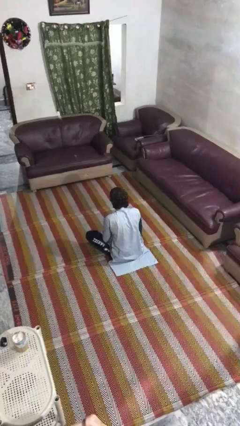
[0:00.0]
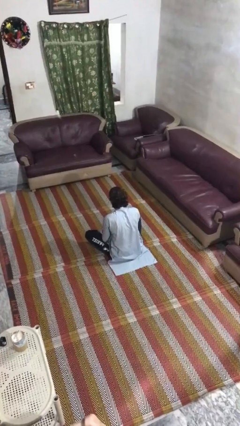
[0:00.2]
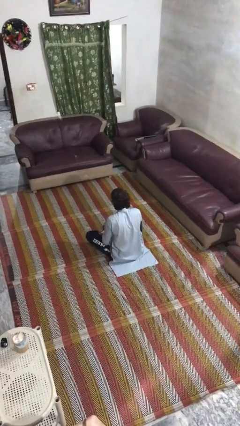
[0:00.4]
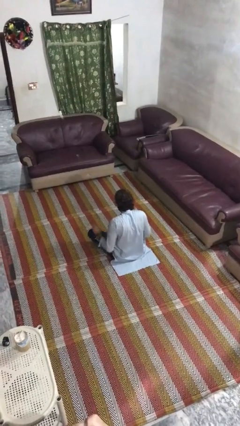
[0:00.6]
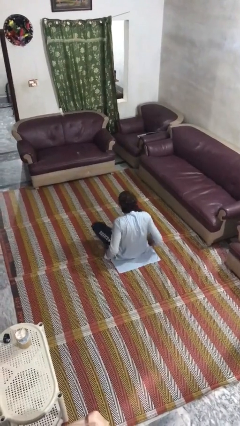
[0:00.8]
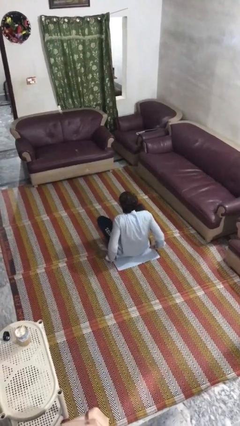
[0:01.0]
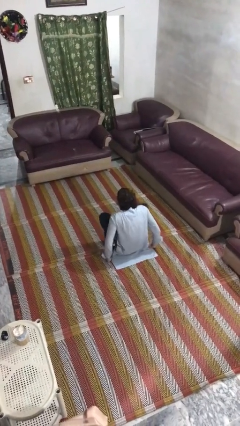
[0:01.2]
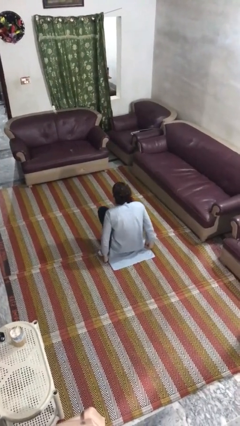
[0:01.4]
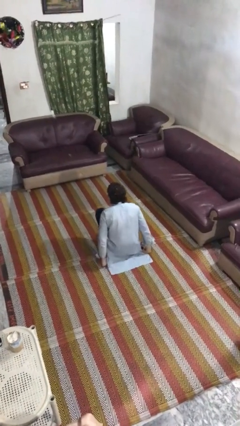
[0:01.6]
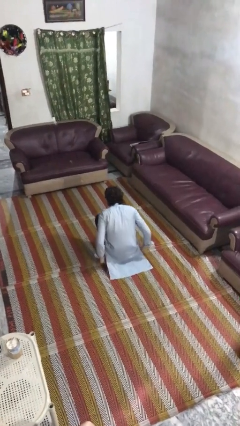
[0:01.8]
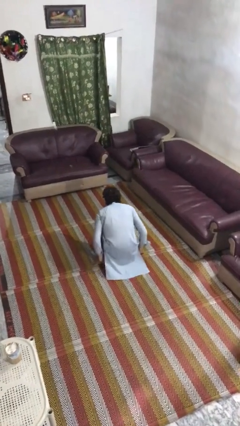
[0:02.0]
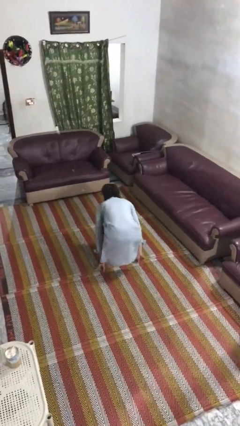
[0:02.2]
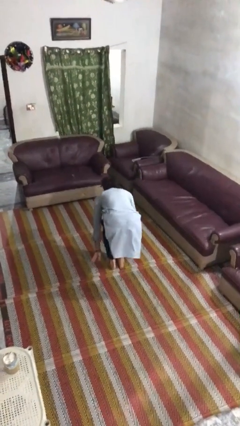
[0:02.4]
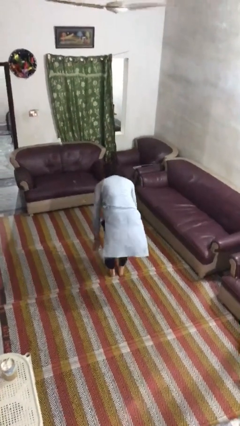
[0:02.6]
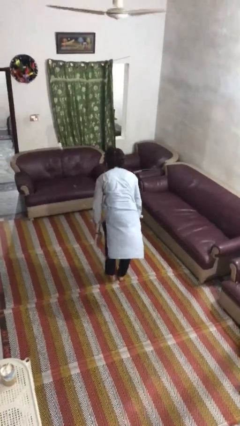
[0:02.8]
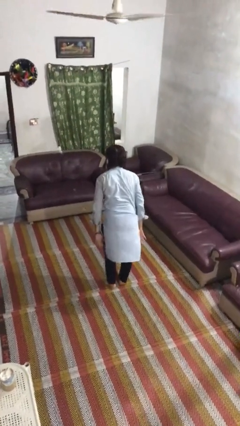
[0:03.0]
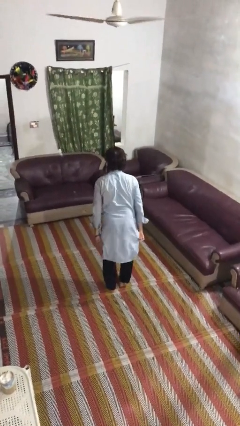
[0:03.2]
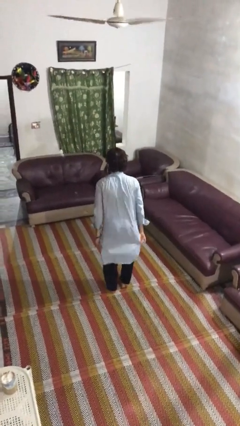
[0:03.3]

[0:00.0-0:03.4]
person stands up from floor

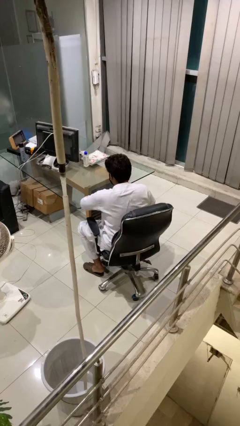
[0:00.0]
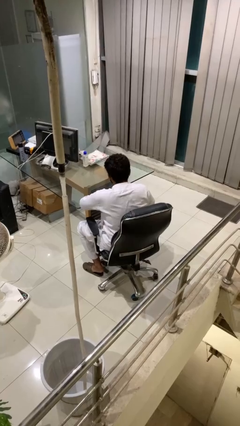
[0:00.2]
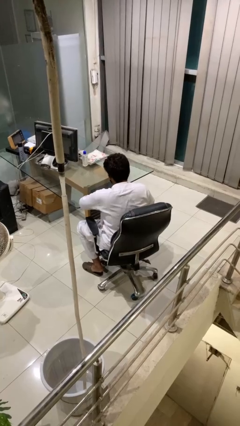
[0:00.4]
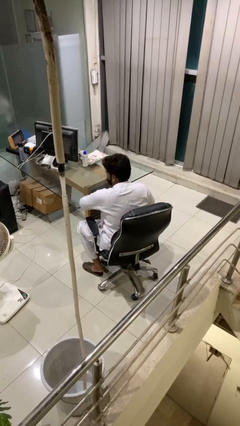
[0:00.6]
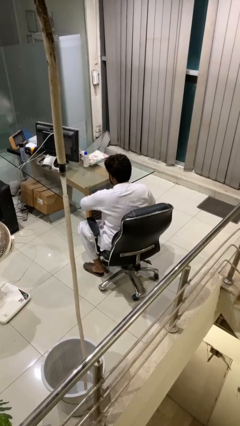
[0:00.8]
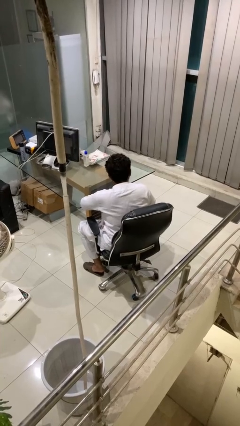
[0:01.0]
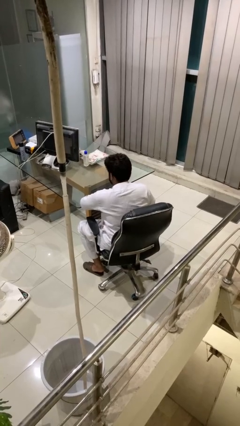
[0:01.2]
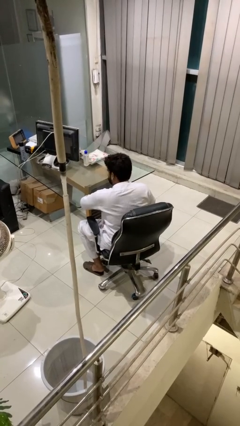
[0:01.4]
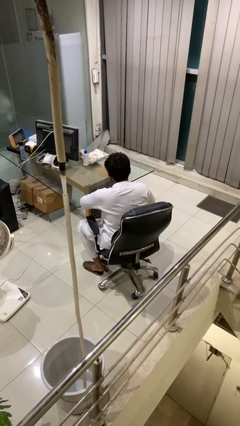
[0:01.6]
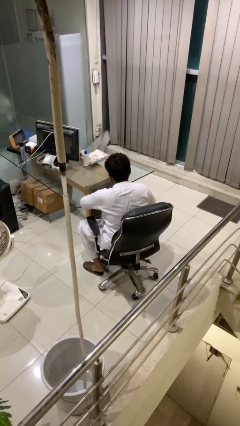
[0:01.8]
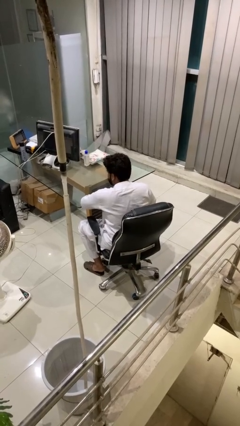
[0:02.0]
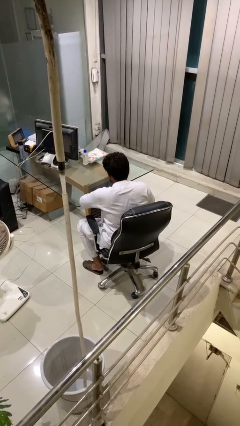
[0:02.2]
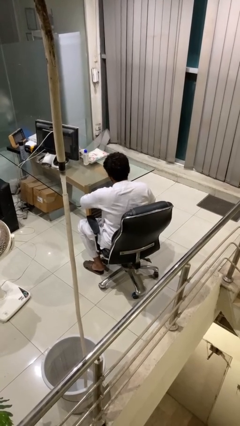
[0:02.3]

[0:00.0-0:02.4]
person shakes head

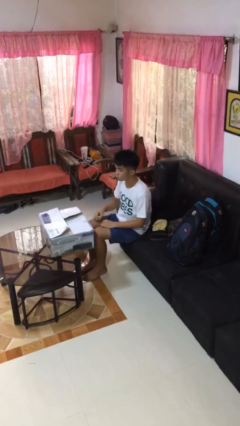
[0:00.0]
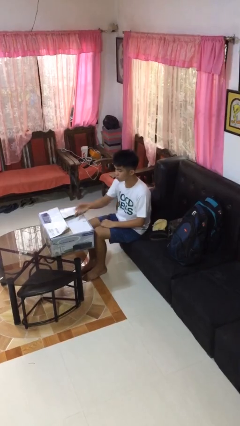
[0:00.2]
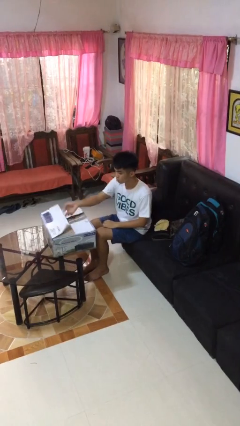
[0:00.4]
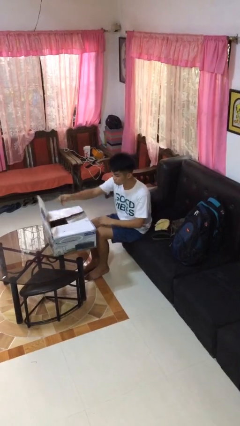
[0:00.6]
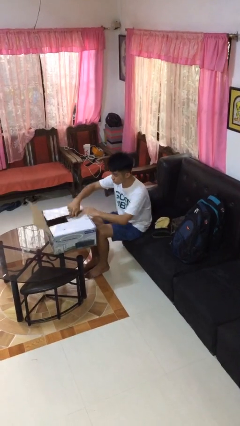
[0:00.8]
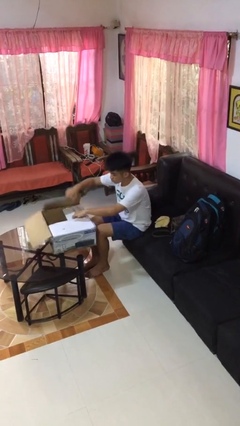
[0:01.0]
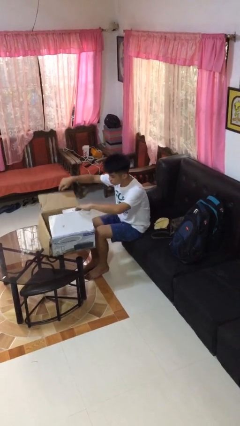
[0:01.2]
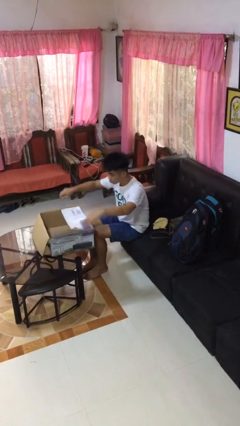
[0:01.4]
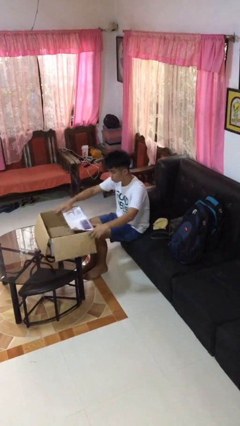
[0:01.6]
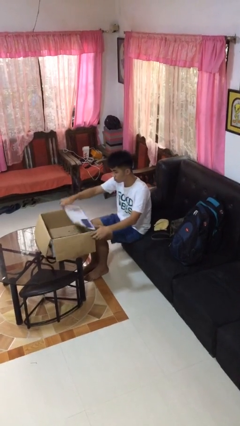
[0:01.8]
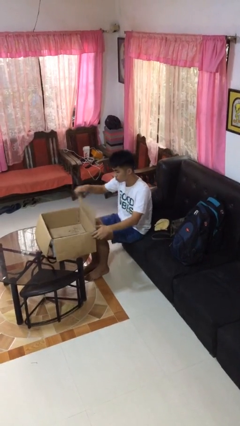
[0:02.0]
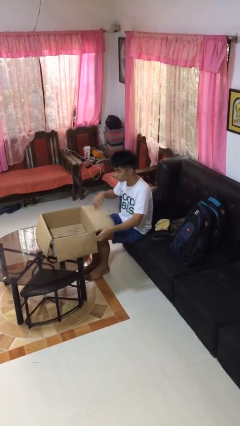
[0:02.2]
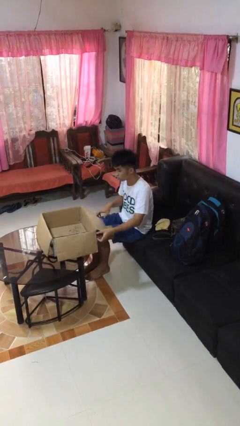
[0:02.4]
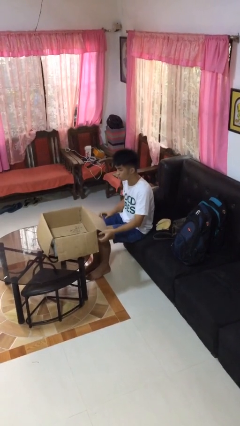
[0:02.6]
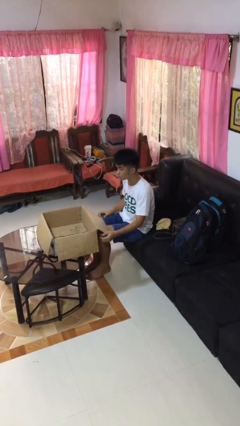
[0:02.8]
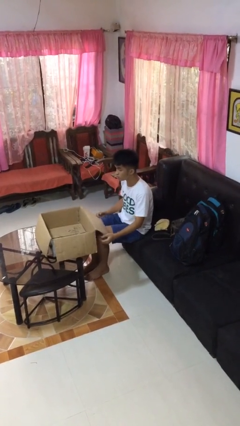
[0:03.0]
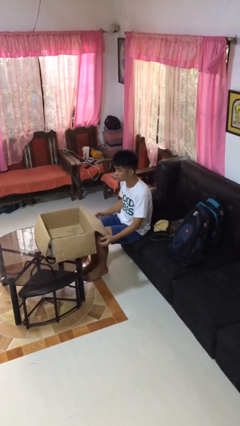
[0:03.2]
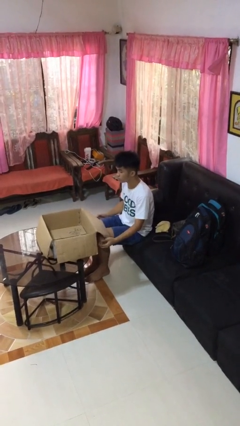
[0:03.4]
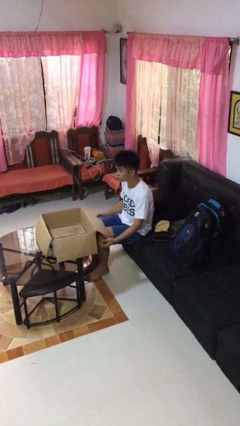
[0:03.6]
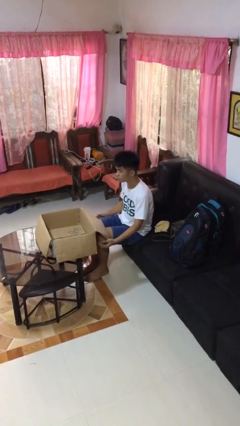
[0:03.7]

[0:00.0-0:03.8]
person opens box

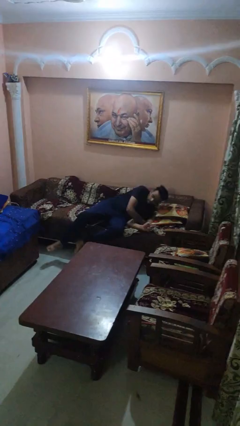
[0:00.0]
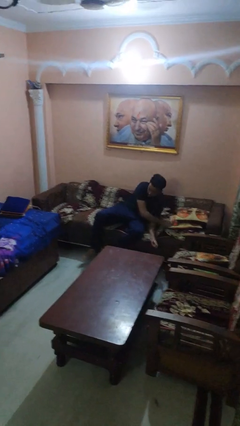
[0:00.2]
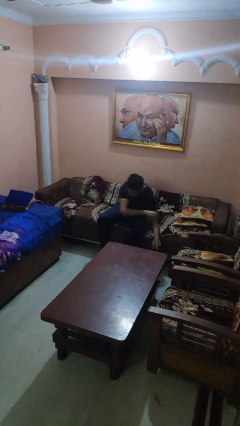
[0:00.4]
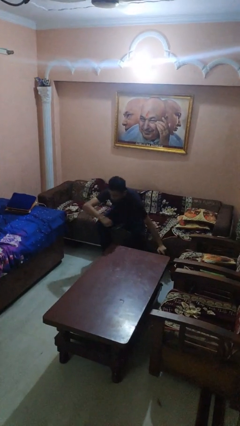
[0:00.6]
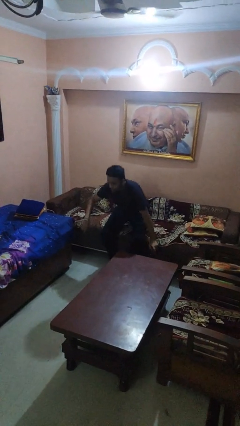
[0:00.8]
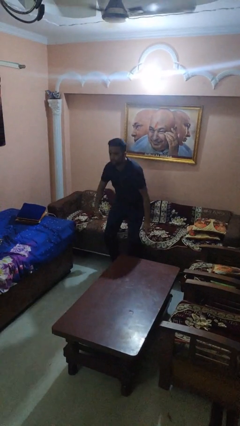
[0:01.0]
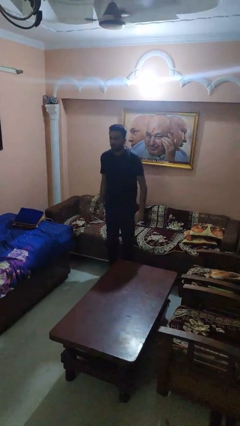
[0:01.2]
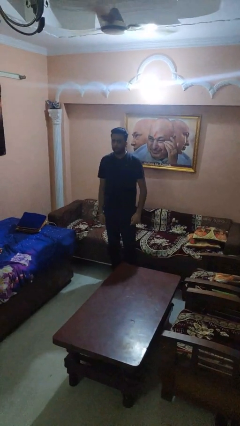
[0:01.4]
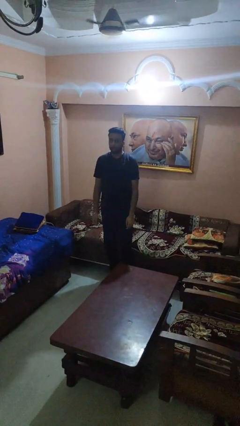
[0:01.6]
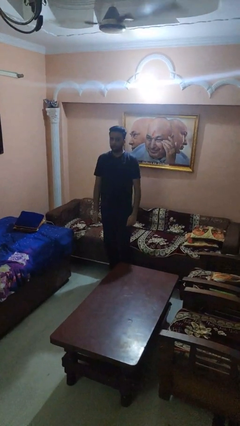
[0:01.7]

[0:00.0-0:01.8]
person stands up

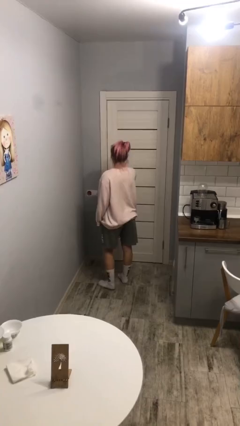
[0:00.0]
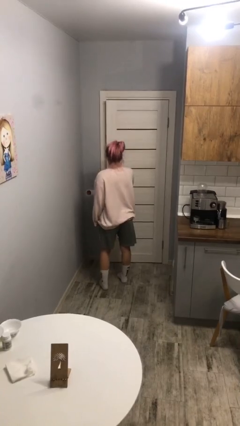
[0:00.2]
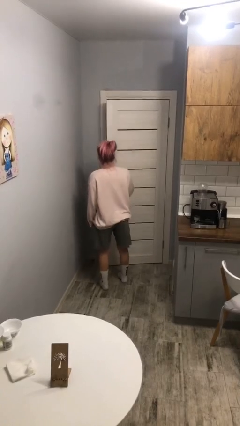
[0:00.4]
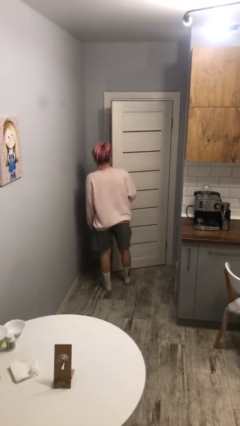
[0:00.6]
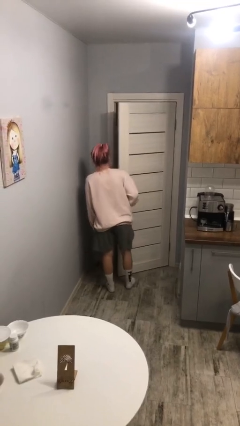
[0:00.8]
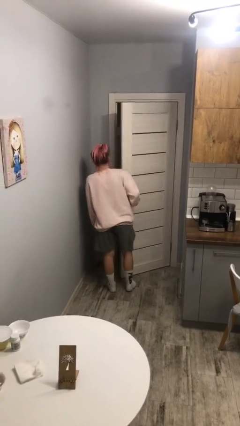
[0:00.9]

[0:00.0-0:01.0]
person opens facility door

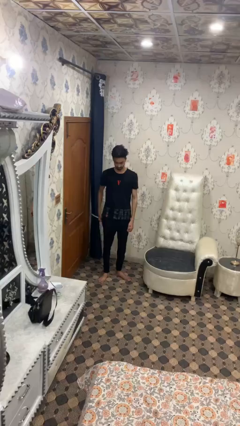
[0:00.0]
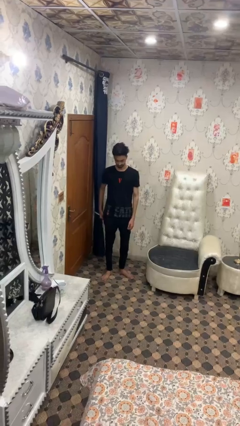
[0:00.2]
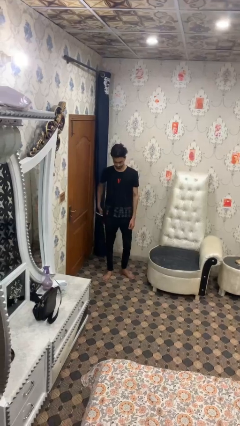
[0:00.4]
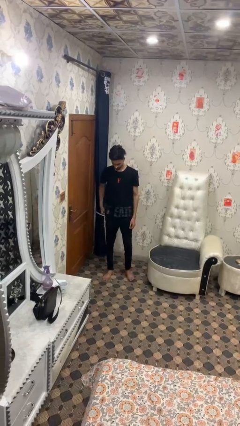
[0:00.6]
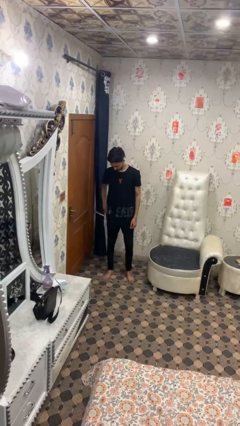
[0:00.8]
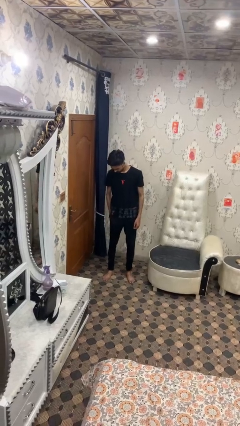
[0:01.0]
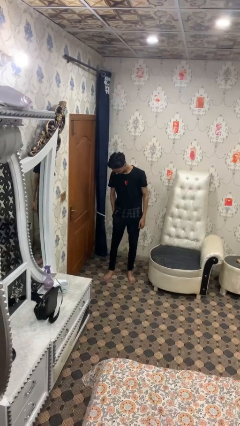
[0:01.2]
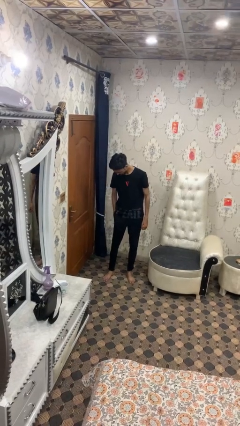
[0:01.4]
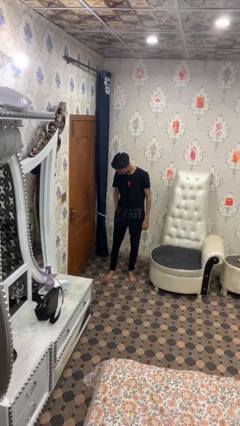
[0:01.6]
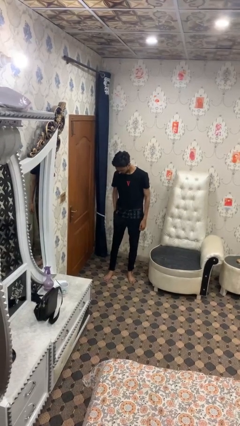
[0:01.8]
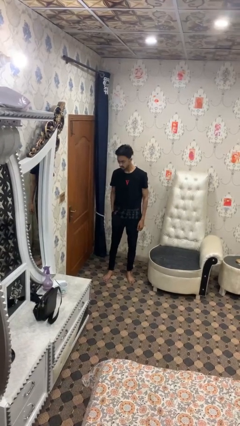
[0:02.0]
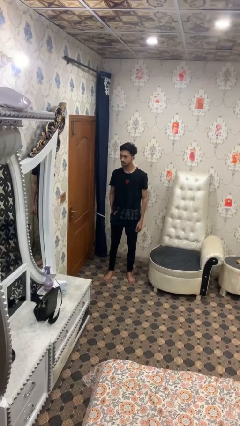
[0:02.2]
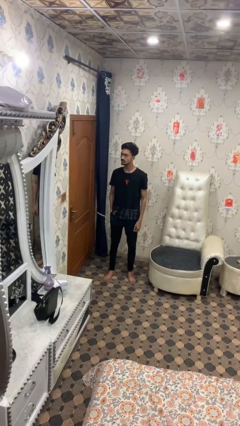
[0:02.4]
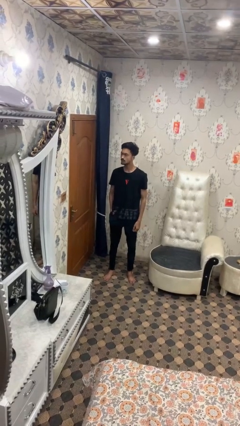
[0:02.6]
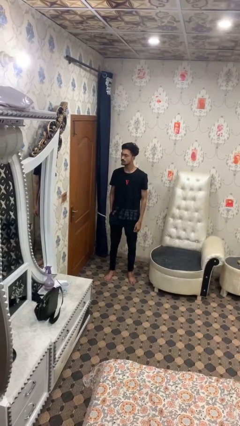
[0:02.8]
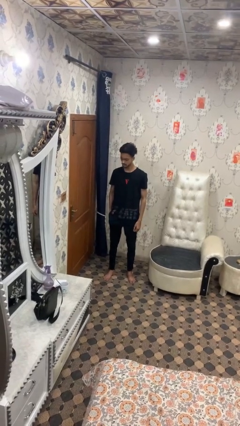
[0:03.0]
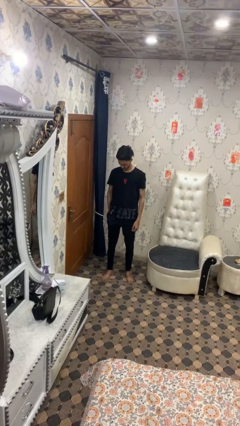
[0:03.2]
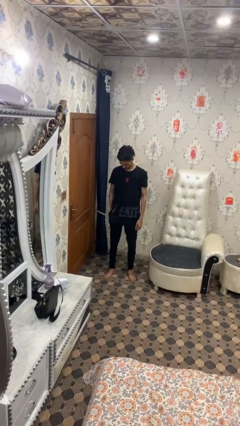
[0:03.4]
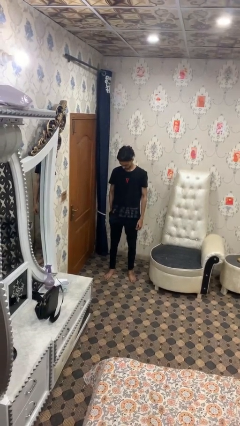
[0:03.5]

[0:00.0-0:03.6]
person puts hands in back pockets

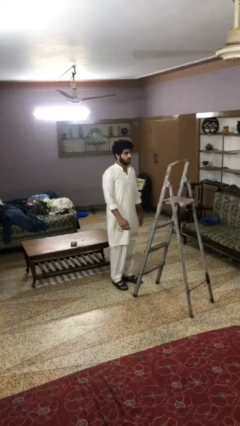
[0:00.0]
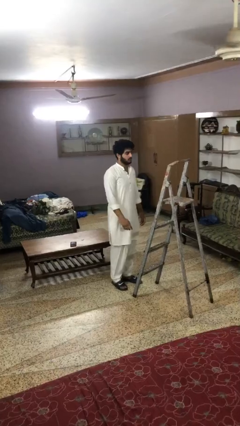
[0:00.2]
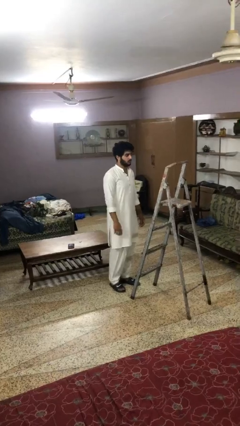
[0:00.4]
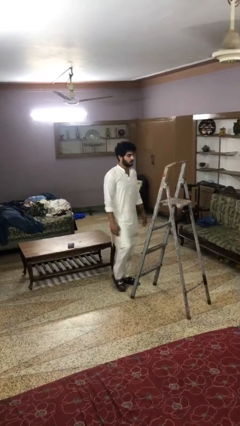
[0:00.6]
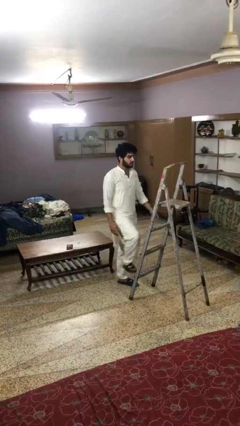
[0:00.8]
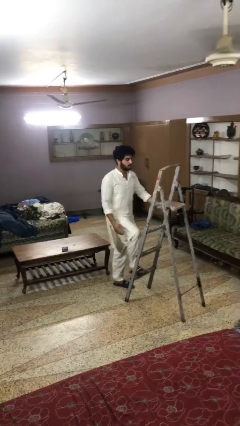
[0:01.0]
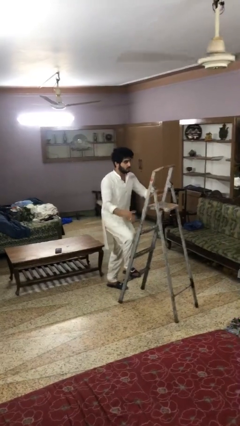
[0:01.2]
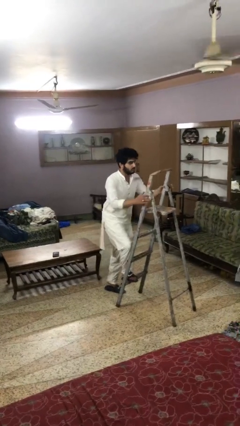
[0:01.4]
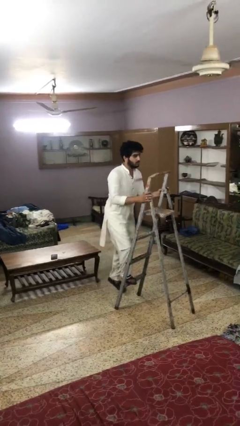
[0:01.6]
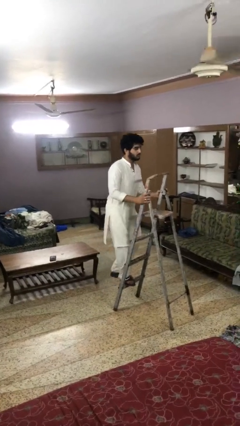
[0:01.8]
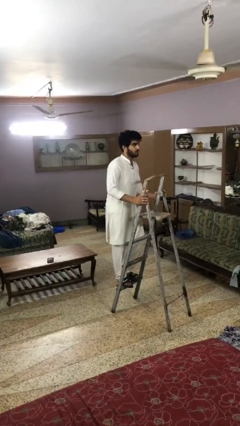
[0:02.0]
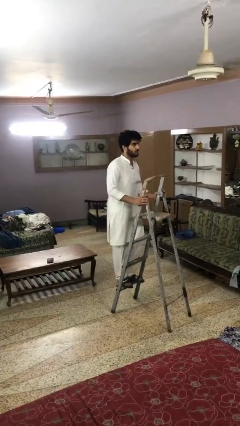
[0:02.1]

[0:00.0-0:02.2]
person climbs up ladder
